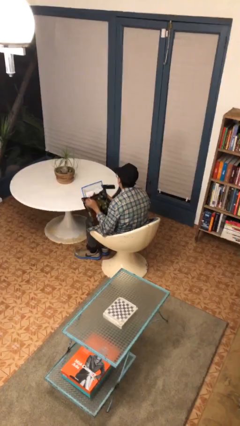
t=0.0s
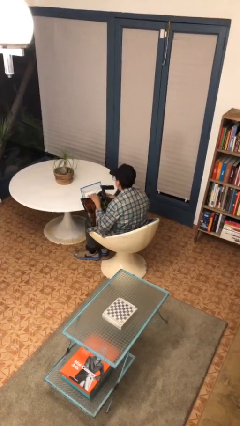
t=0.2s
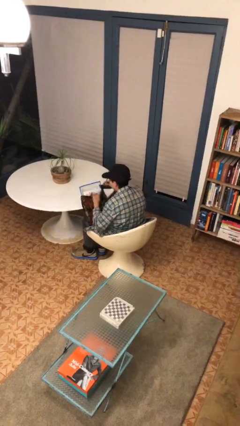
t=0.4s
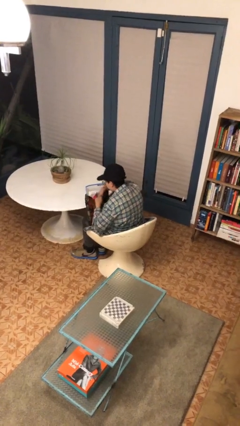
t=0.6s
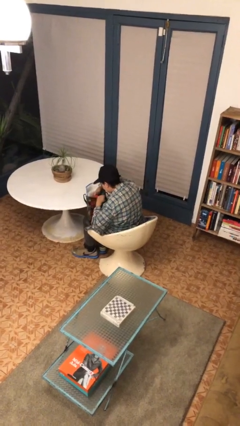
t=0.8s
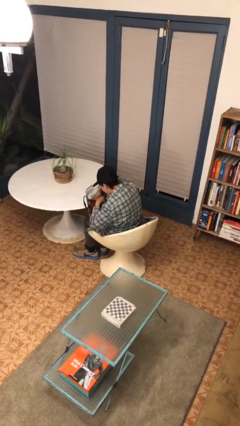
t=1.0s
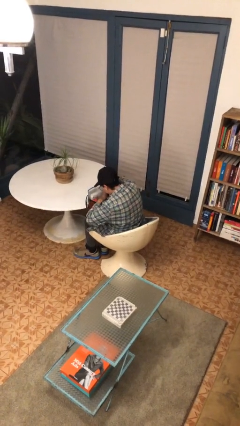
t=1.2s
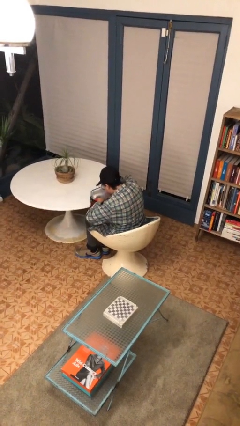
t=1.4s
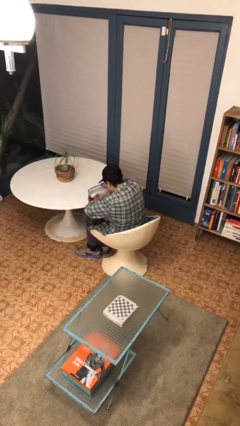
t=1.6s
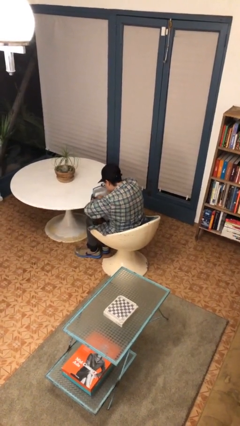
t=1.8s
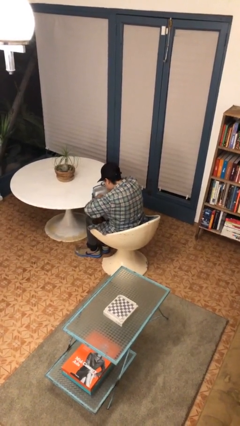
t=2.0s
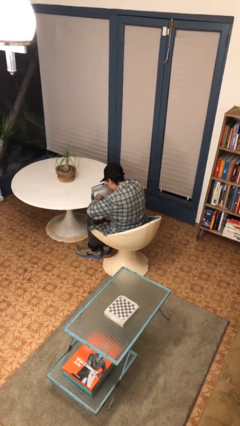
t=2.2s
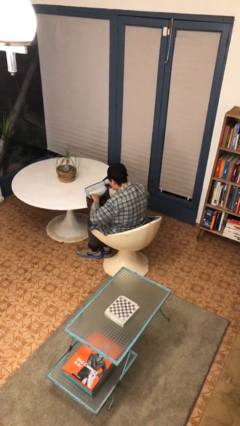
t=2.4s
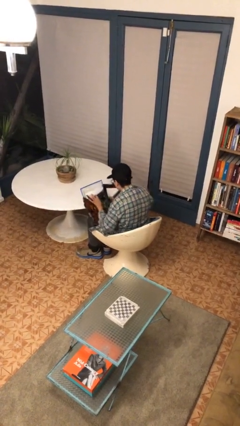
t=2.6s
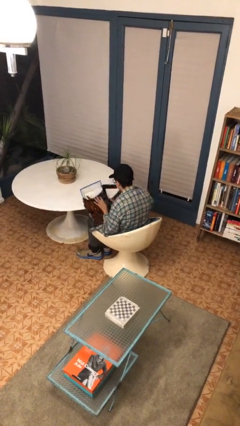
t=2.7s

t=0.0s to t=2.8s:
person searches in bag

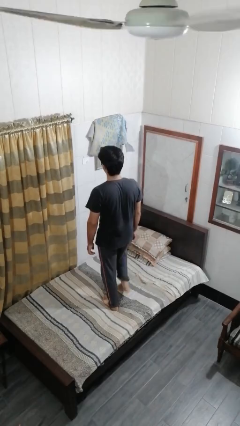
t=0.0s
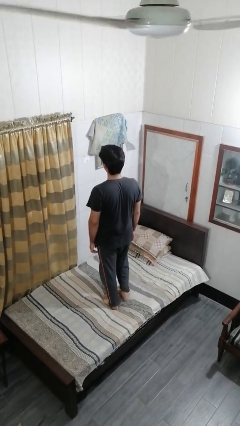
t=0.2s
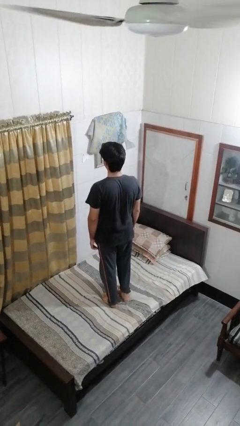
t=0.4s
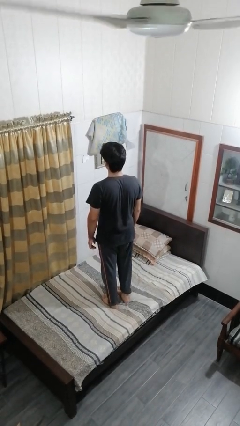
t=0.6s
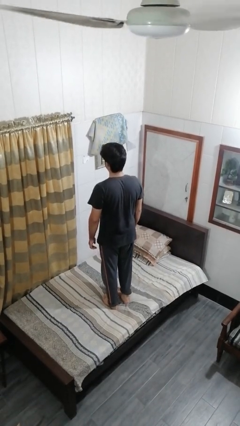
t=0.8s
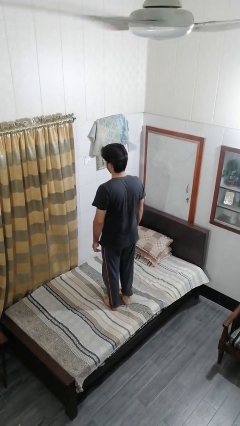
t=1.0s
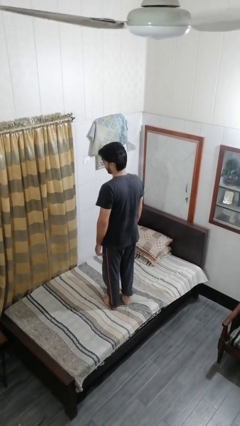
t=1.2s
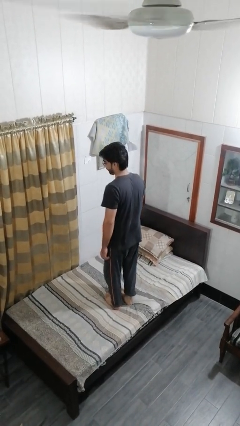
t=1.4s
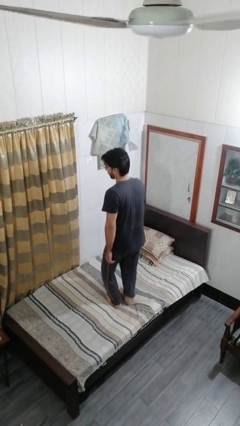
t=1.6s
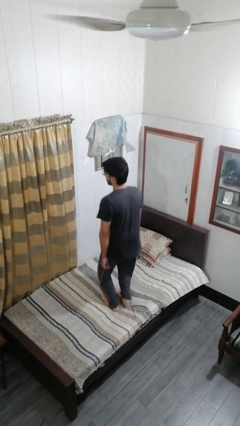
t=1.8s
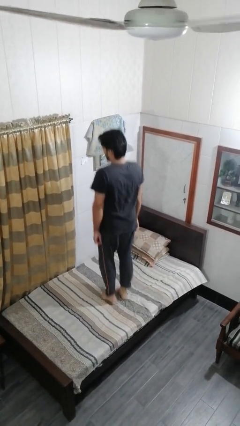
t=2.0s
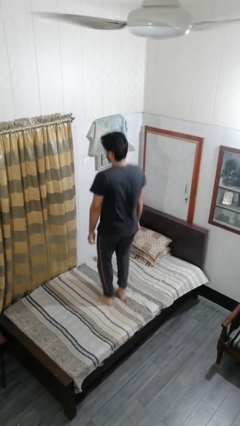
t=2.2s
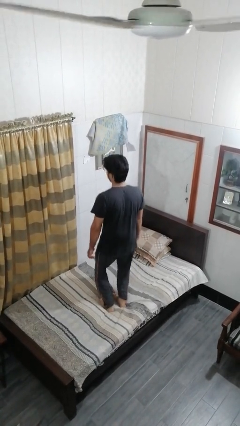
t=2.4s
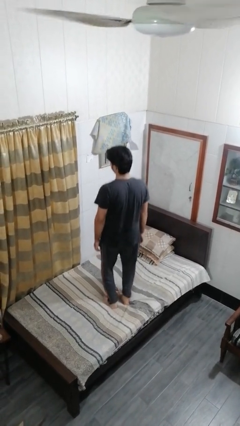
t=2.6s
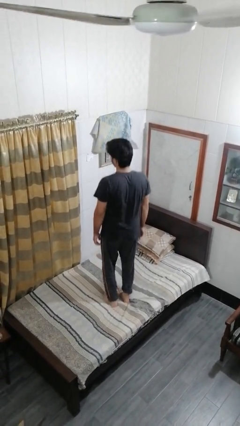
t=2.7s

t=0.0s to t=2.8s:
person jumps on bed

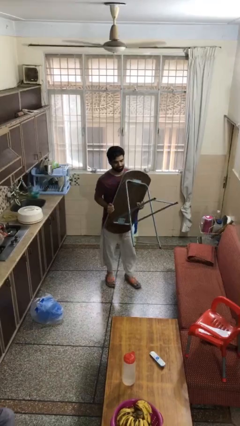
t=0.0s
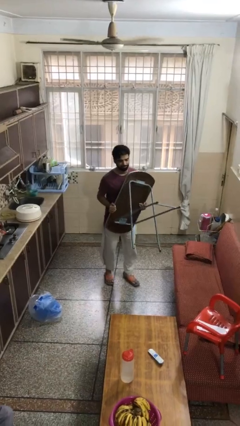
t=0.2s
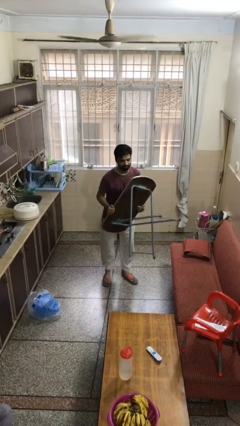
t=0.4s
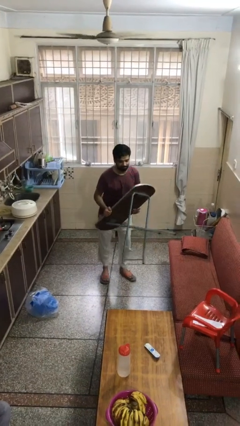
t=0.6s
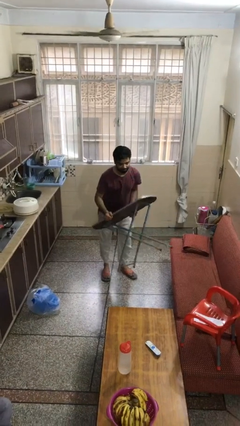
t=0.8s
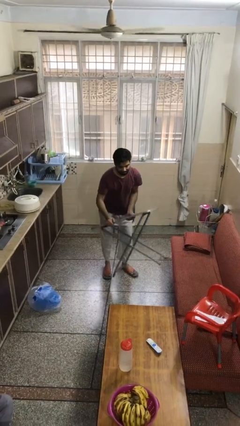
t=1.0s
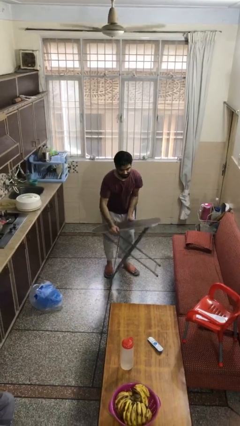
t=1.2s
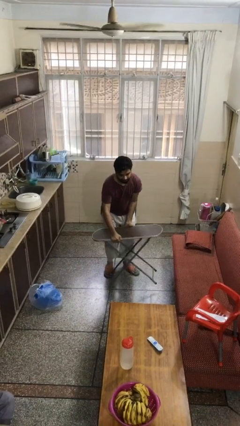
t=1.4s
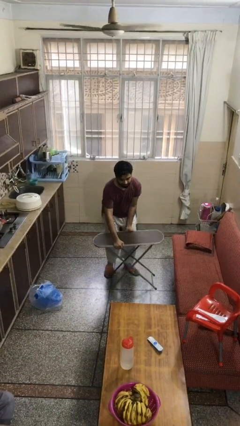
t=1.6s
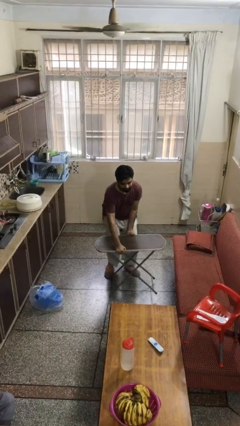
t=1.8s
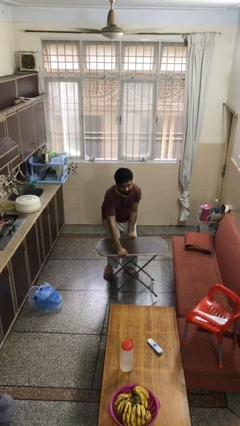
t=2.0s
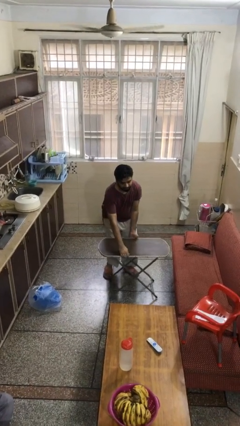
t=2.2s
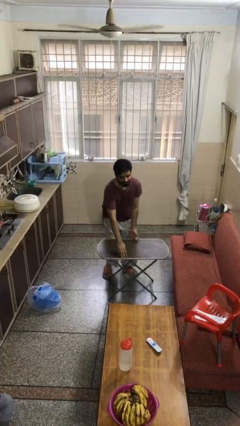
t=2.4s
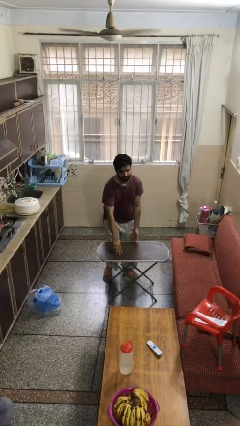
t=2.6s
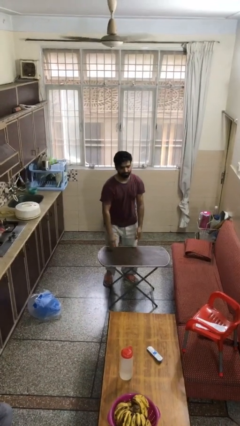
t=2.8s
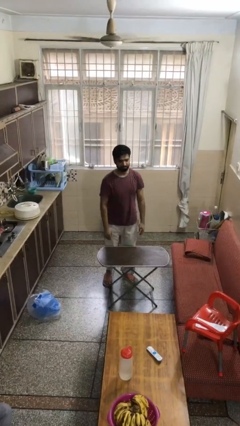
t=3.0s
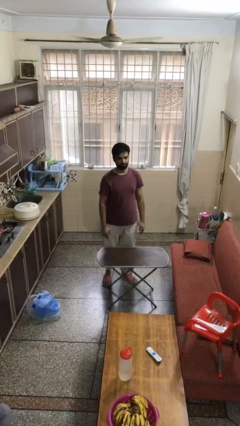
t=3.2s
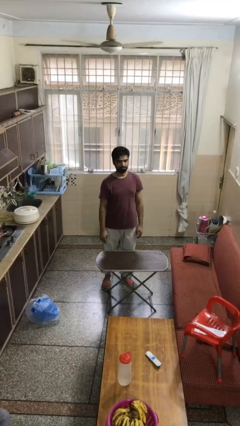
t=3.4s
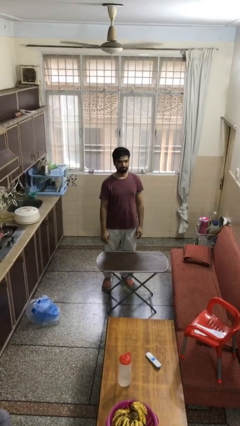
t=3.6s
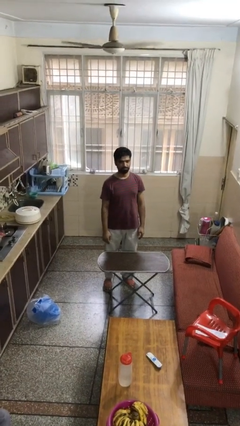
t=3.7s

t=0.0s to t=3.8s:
person puts down object on floor

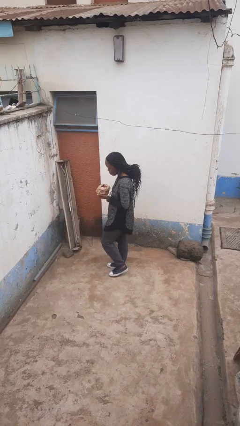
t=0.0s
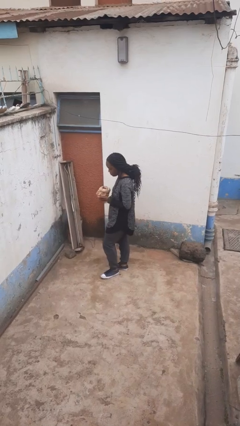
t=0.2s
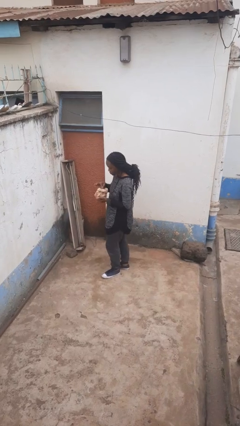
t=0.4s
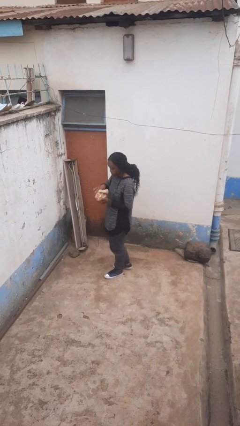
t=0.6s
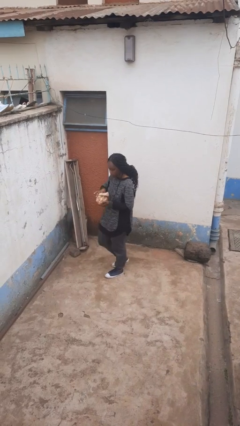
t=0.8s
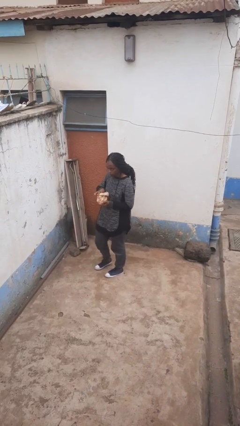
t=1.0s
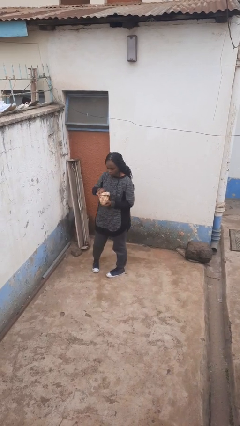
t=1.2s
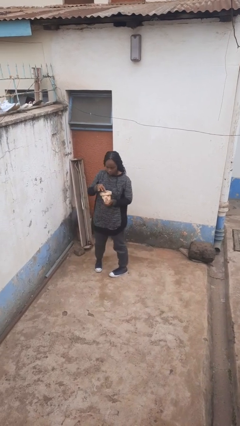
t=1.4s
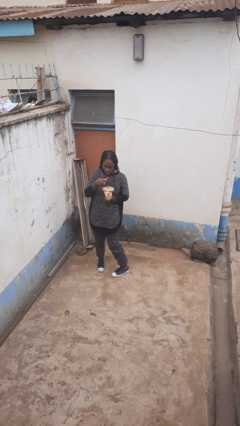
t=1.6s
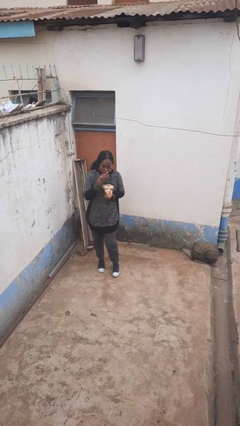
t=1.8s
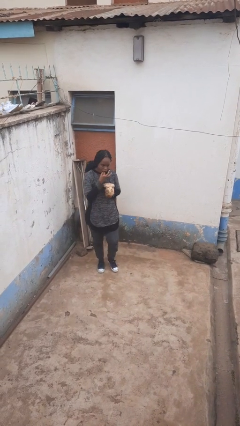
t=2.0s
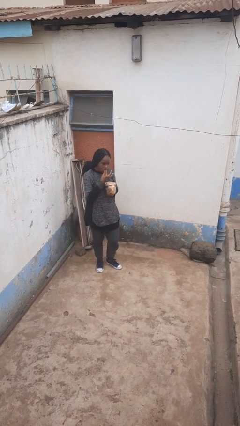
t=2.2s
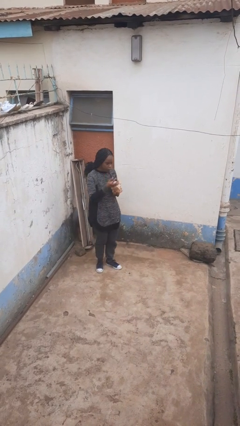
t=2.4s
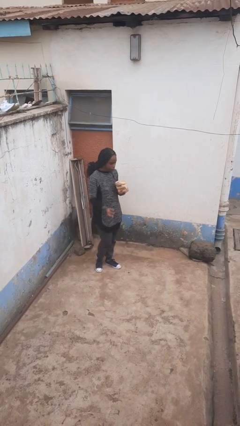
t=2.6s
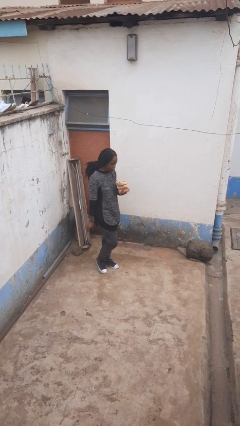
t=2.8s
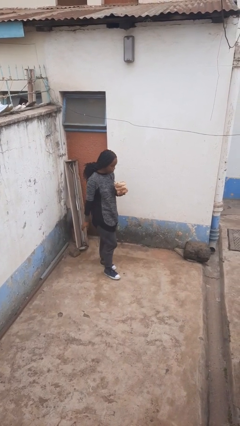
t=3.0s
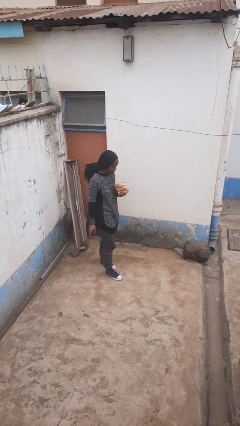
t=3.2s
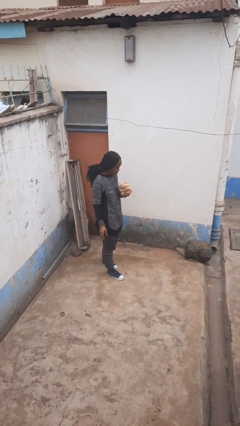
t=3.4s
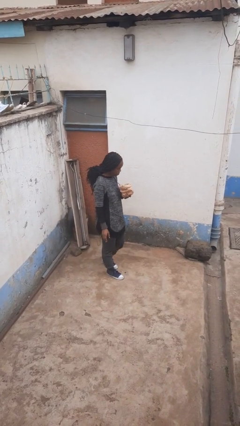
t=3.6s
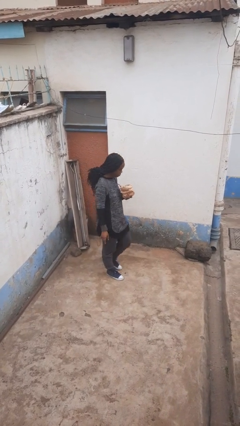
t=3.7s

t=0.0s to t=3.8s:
person eats snack from bag

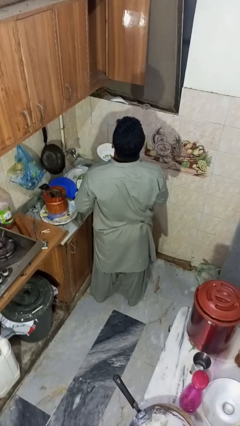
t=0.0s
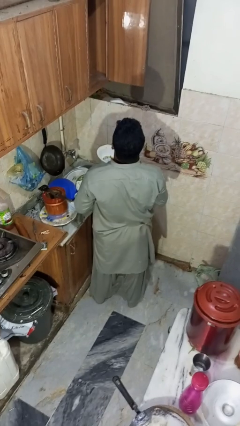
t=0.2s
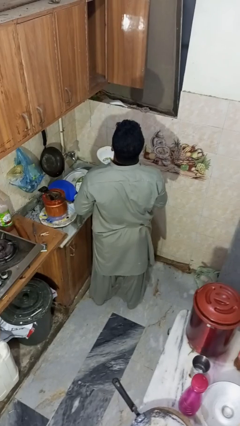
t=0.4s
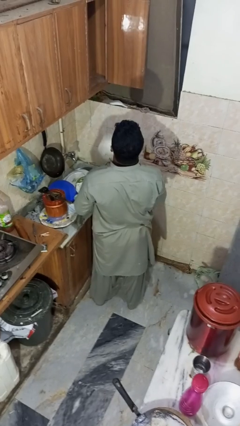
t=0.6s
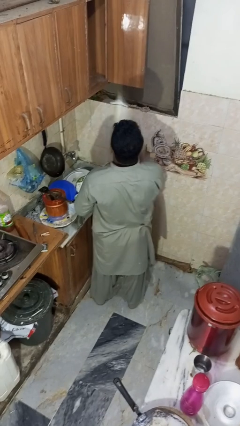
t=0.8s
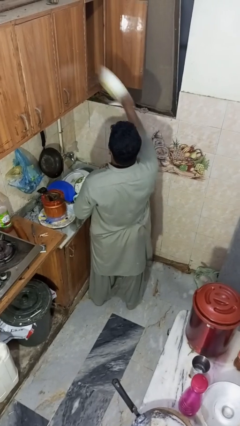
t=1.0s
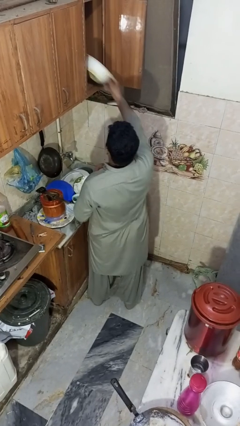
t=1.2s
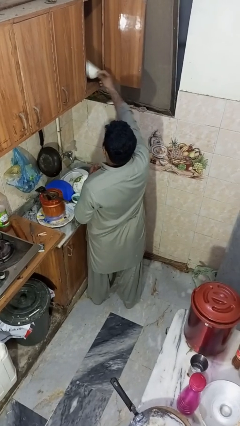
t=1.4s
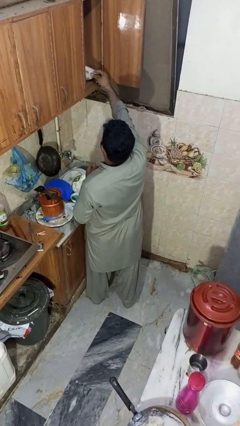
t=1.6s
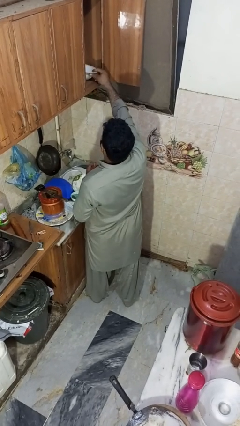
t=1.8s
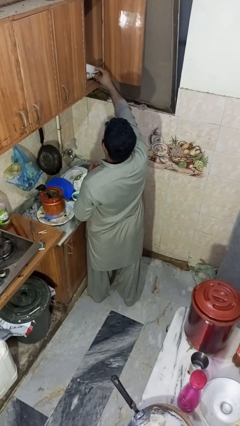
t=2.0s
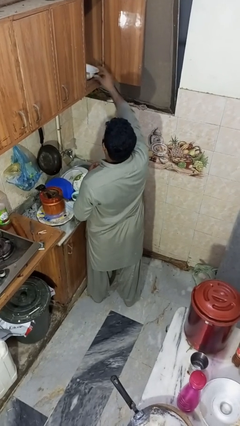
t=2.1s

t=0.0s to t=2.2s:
person puts object in cabinet

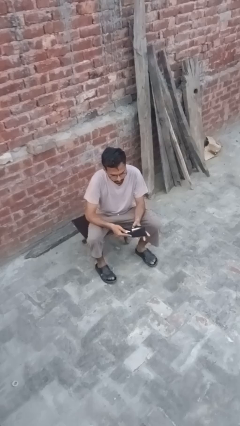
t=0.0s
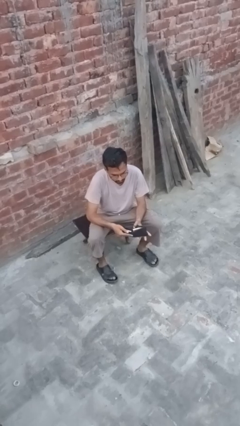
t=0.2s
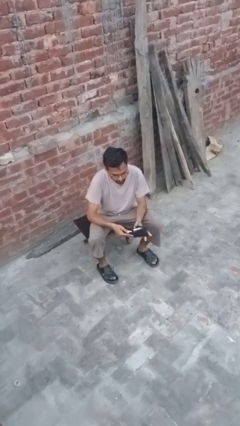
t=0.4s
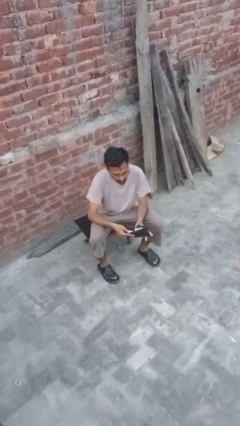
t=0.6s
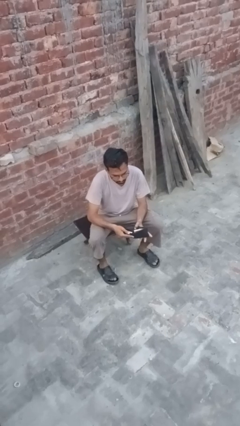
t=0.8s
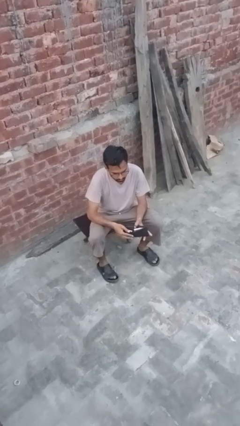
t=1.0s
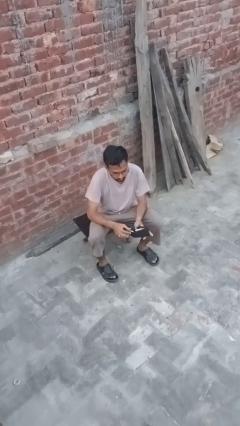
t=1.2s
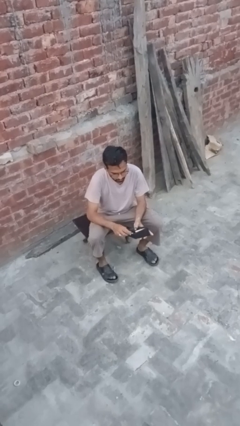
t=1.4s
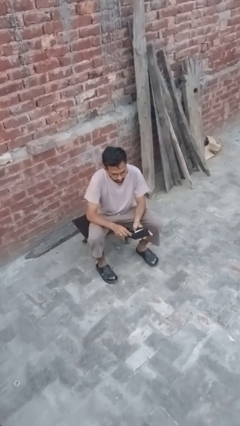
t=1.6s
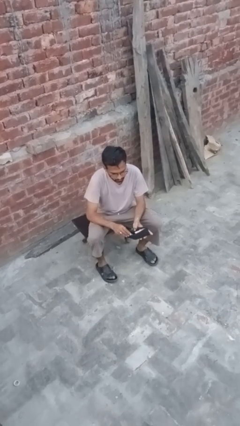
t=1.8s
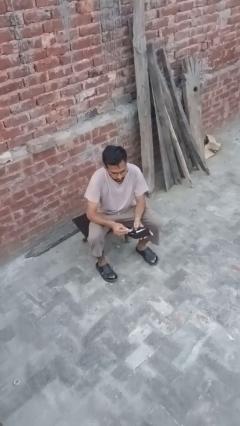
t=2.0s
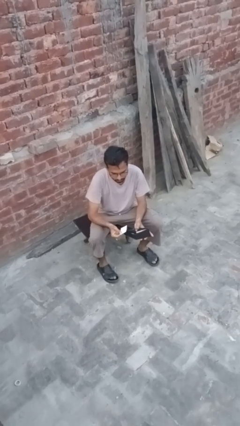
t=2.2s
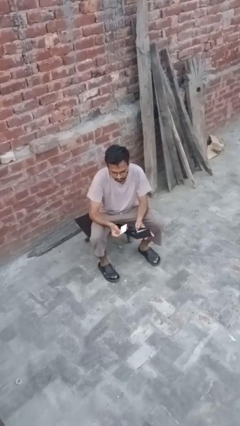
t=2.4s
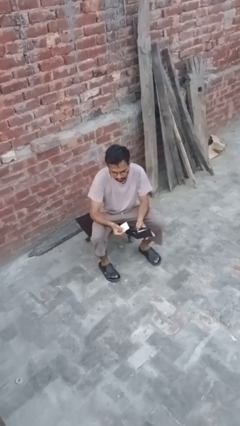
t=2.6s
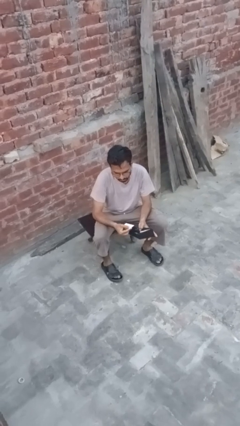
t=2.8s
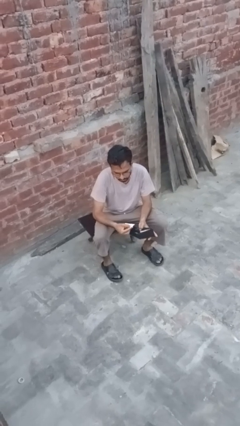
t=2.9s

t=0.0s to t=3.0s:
person takes object from purse
